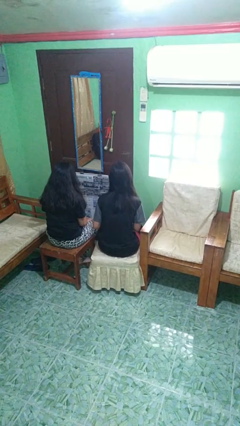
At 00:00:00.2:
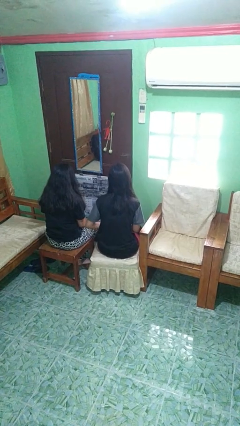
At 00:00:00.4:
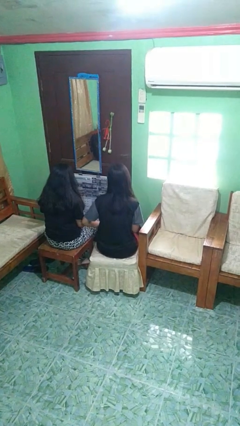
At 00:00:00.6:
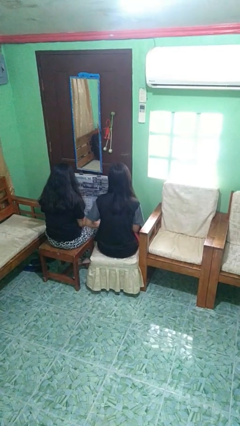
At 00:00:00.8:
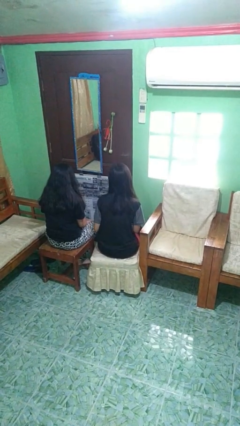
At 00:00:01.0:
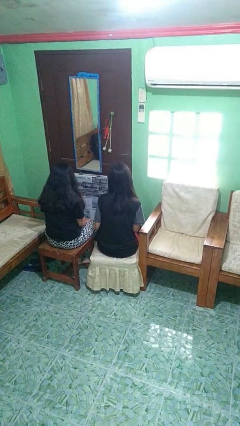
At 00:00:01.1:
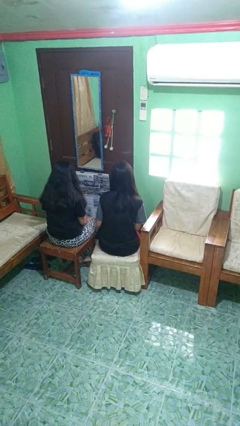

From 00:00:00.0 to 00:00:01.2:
person nudges person with elbow

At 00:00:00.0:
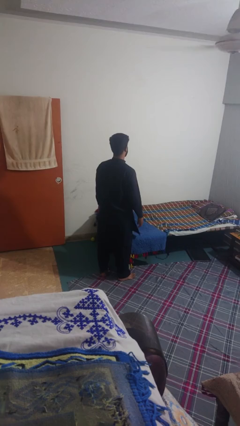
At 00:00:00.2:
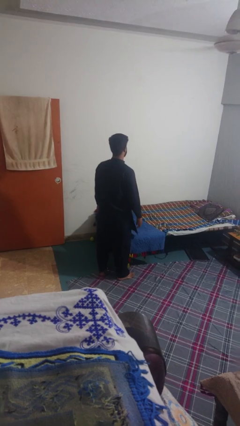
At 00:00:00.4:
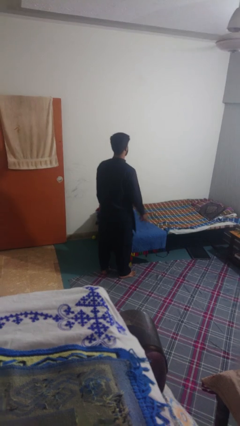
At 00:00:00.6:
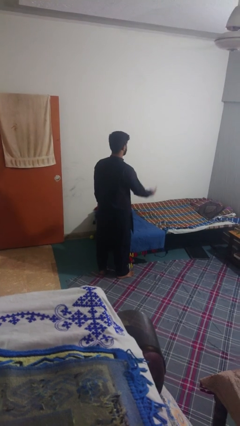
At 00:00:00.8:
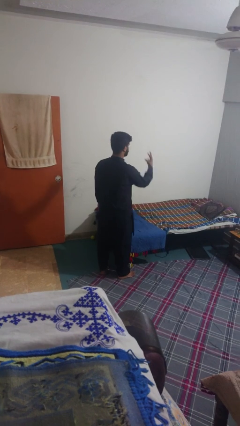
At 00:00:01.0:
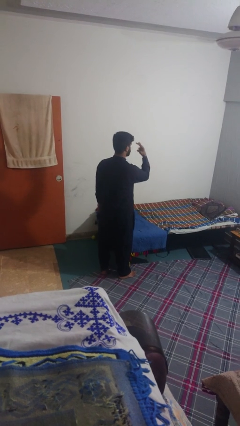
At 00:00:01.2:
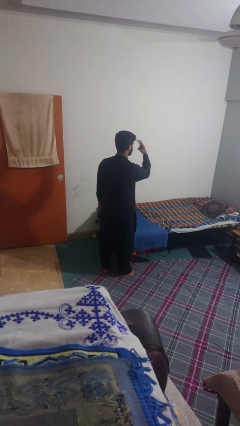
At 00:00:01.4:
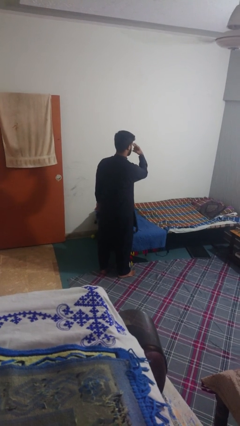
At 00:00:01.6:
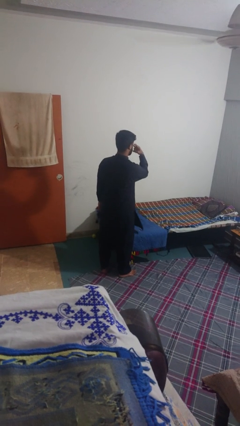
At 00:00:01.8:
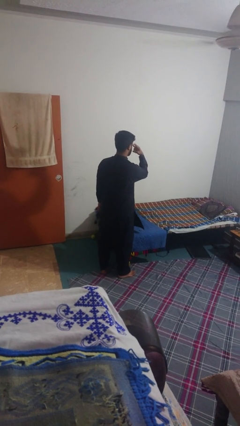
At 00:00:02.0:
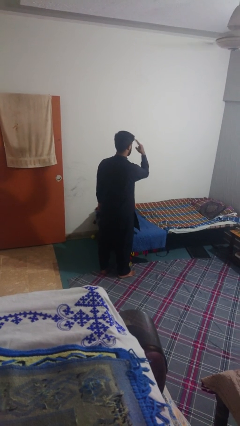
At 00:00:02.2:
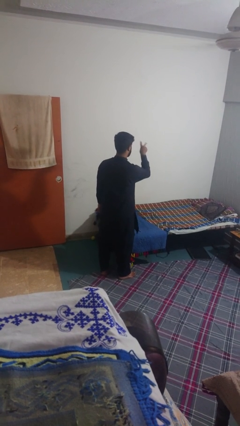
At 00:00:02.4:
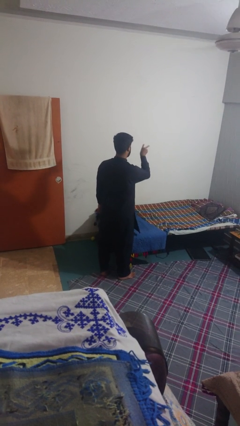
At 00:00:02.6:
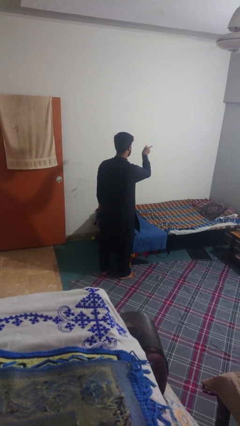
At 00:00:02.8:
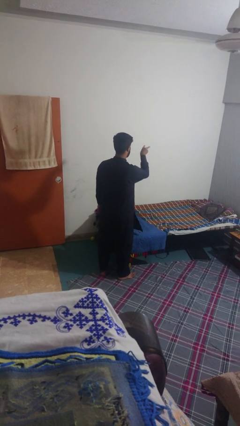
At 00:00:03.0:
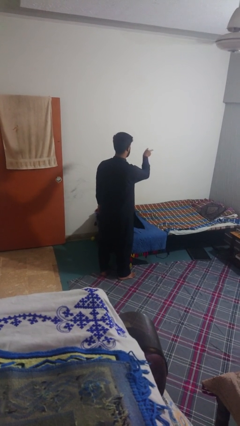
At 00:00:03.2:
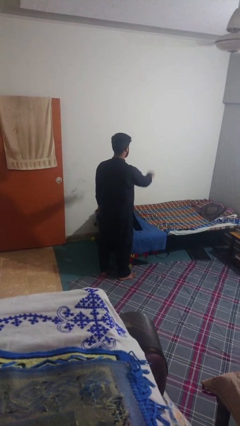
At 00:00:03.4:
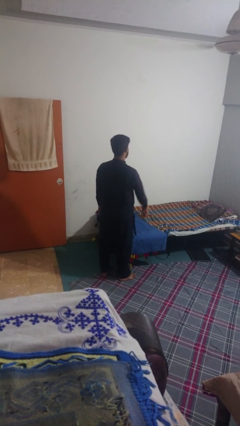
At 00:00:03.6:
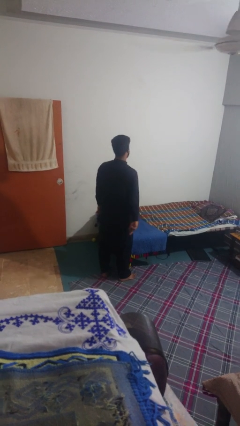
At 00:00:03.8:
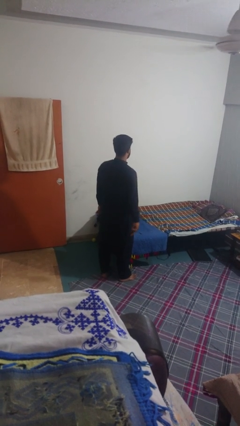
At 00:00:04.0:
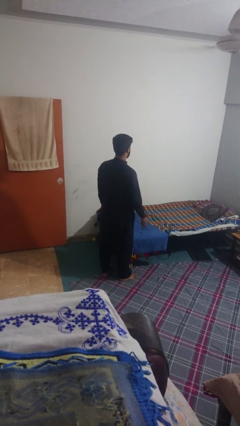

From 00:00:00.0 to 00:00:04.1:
person gestures watch closely

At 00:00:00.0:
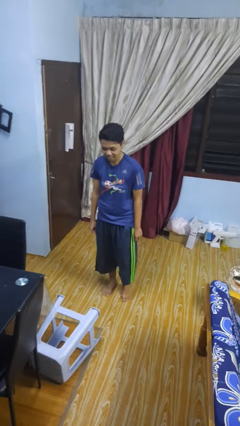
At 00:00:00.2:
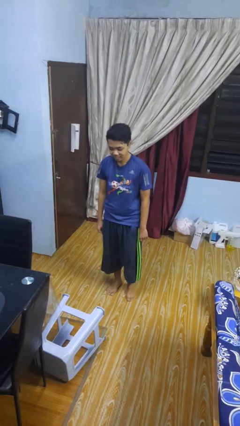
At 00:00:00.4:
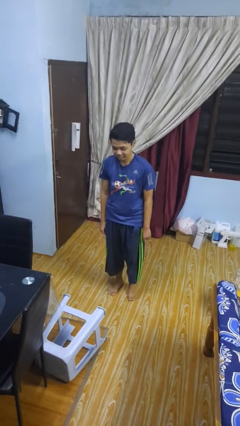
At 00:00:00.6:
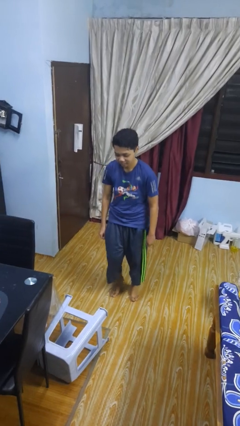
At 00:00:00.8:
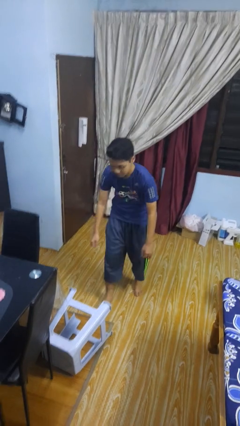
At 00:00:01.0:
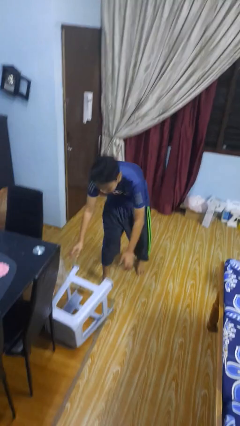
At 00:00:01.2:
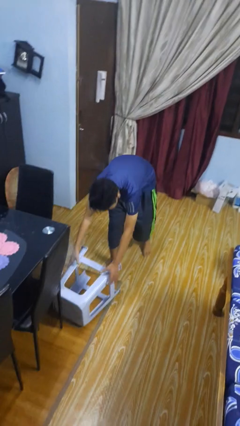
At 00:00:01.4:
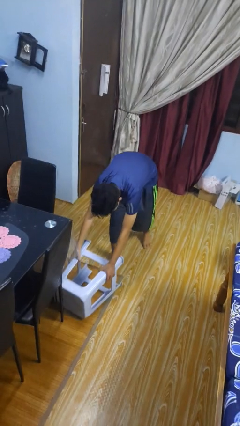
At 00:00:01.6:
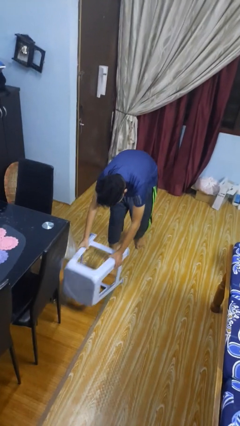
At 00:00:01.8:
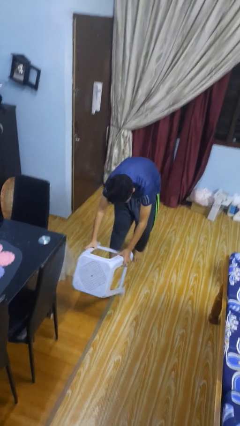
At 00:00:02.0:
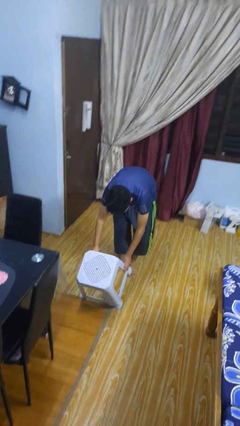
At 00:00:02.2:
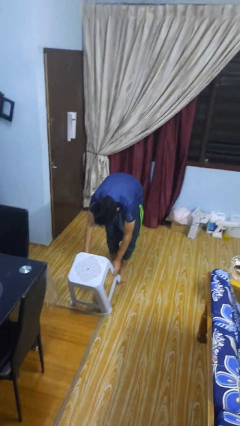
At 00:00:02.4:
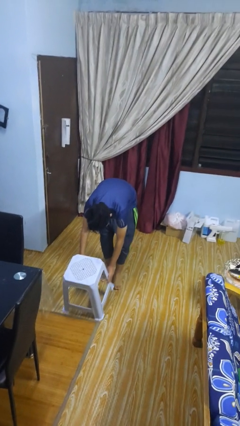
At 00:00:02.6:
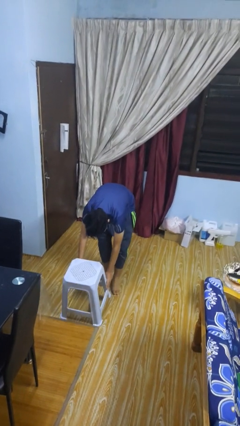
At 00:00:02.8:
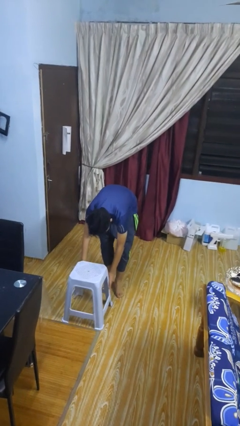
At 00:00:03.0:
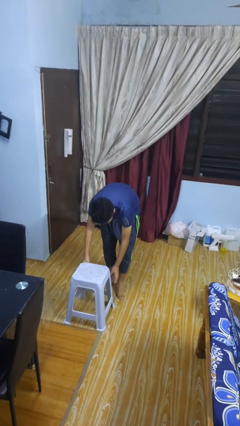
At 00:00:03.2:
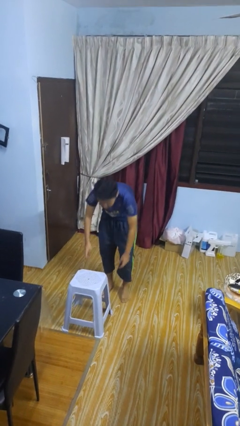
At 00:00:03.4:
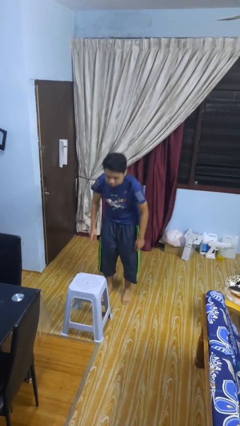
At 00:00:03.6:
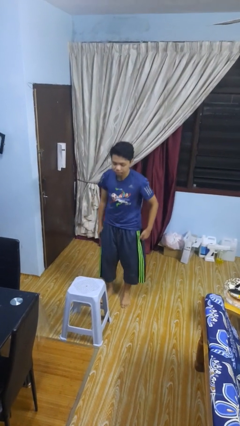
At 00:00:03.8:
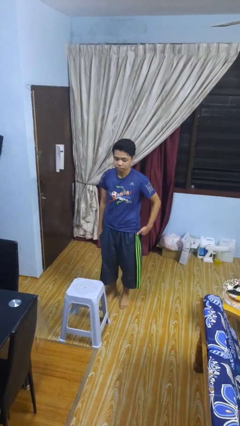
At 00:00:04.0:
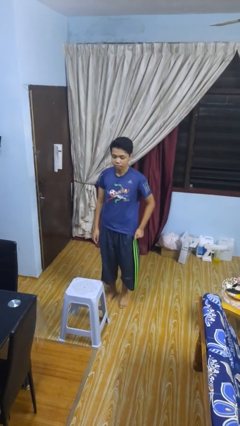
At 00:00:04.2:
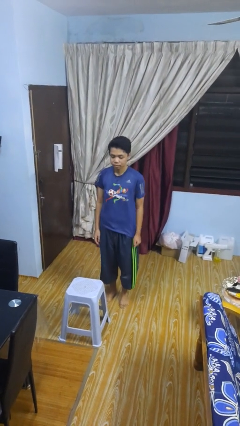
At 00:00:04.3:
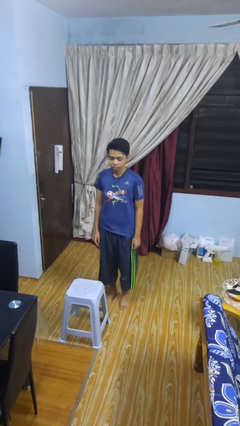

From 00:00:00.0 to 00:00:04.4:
person sets upright furniture

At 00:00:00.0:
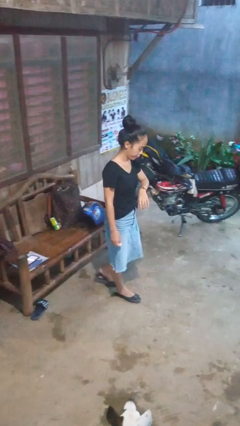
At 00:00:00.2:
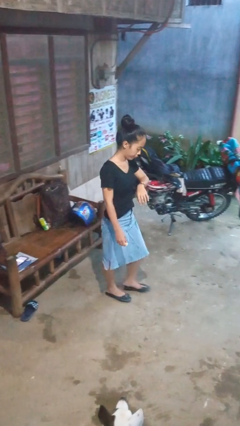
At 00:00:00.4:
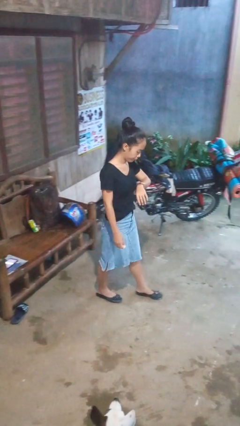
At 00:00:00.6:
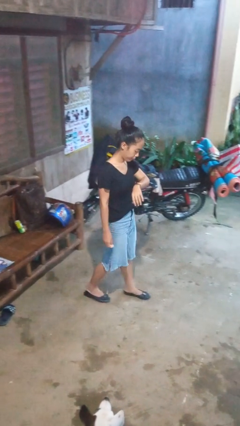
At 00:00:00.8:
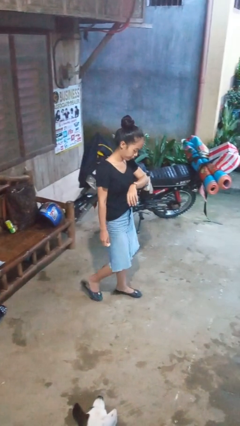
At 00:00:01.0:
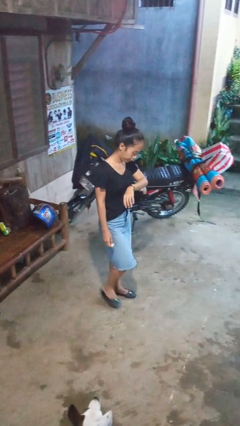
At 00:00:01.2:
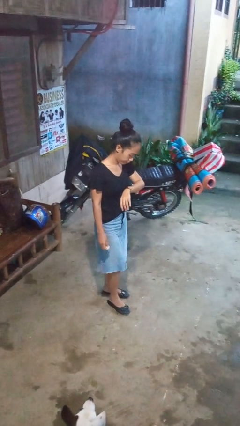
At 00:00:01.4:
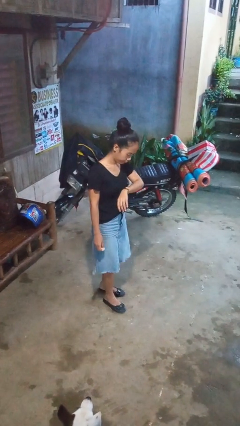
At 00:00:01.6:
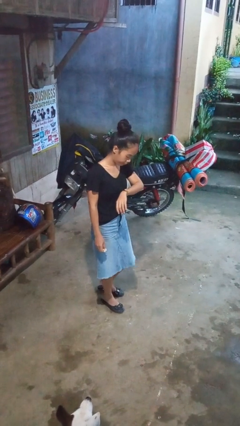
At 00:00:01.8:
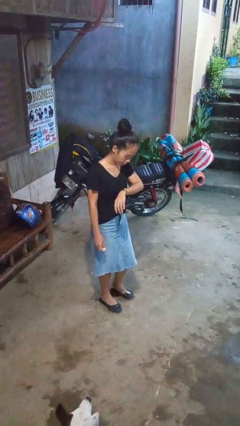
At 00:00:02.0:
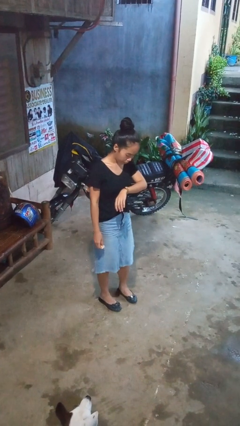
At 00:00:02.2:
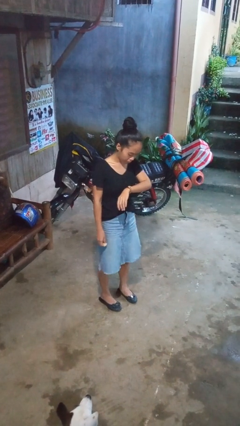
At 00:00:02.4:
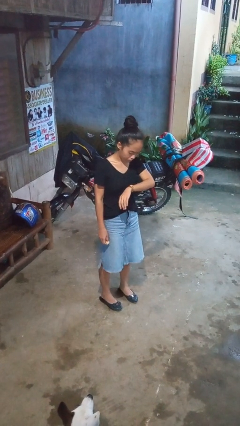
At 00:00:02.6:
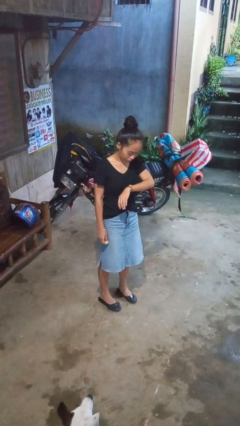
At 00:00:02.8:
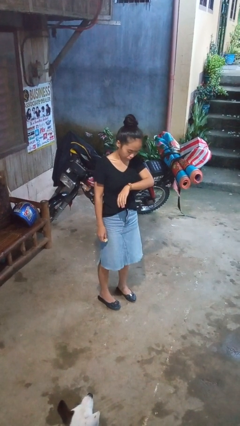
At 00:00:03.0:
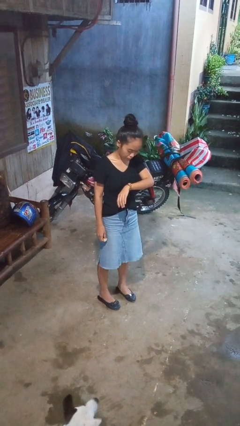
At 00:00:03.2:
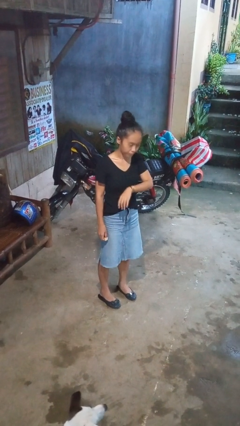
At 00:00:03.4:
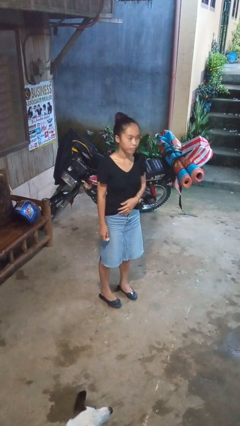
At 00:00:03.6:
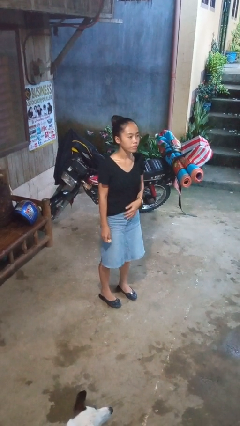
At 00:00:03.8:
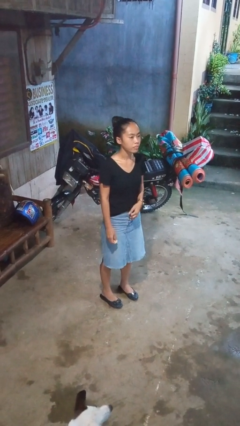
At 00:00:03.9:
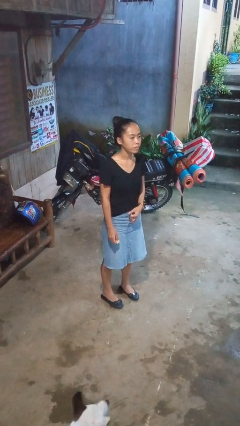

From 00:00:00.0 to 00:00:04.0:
person looks at wristwatch

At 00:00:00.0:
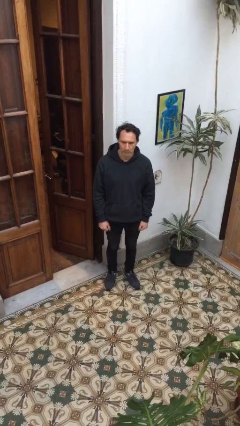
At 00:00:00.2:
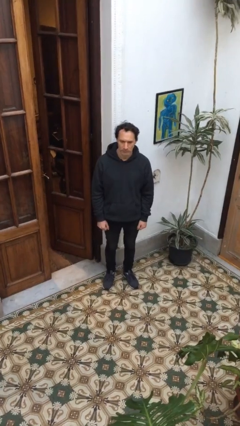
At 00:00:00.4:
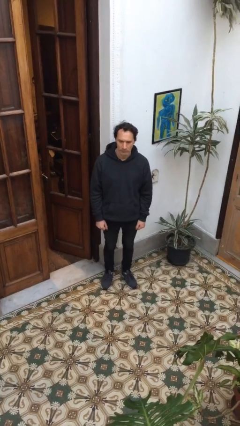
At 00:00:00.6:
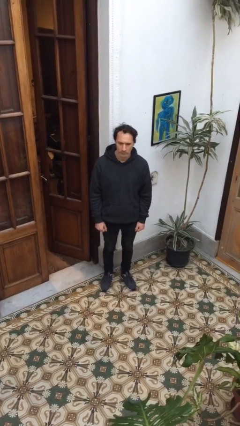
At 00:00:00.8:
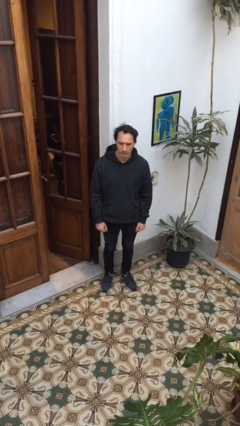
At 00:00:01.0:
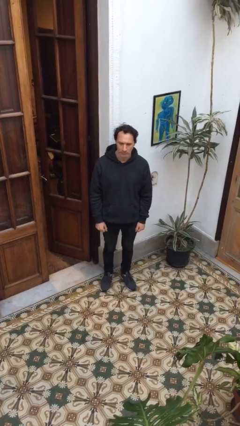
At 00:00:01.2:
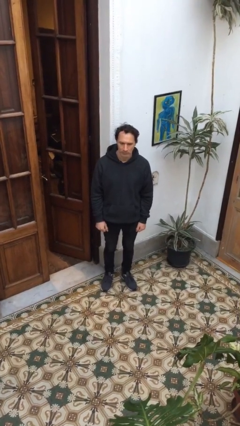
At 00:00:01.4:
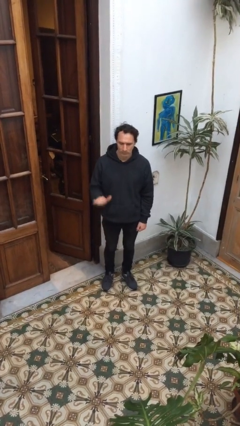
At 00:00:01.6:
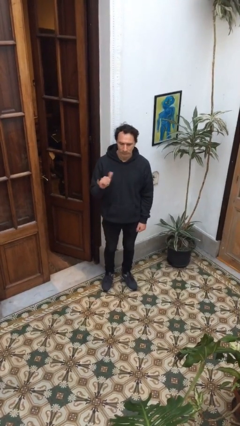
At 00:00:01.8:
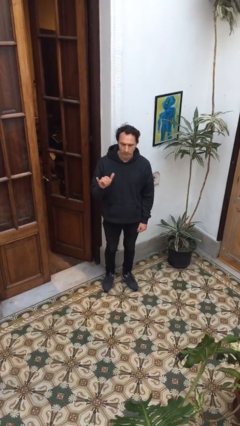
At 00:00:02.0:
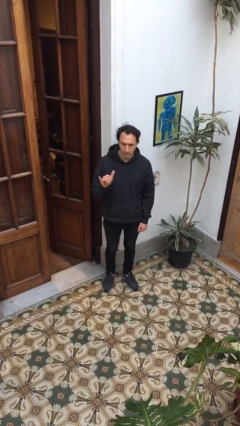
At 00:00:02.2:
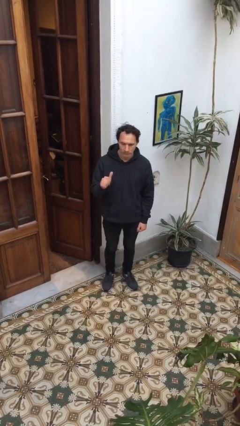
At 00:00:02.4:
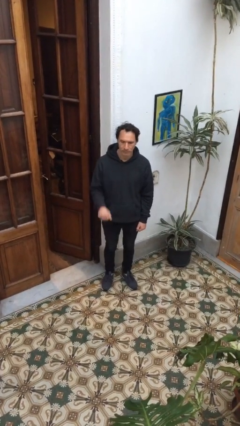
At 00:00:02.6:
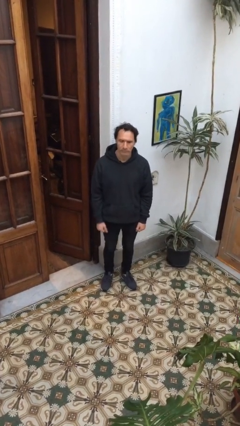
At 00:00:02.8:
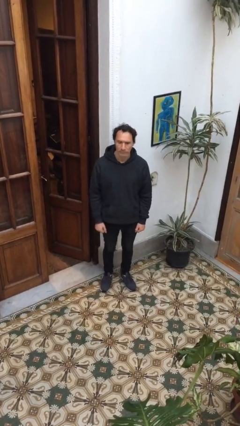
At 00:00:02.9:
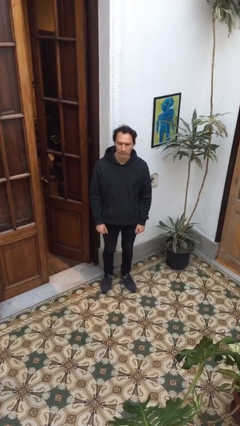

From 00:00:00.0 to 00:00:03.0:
person gestures hang loose

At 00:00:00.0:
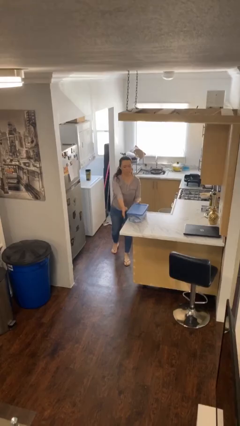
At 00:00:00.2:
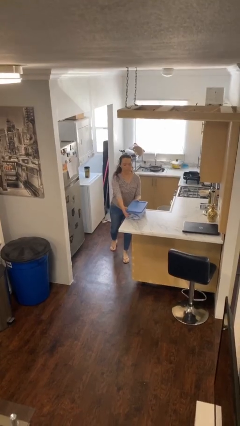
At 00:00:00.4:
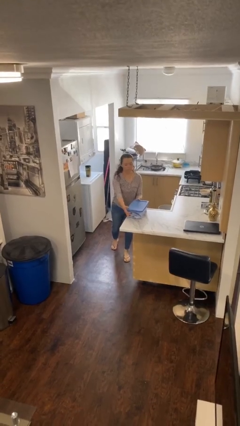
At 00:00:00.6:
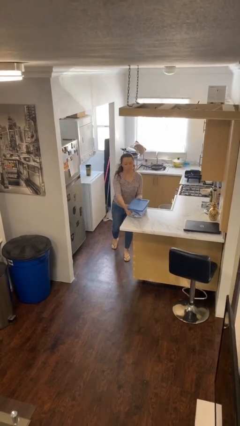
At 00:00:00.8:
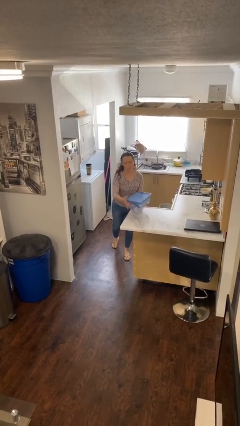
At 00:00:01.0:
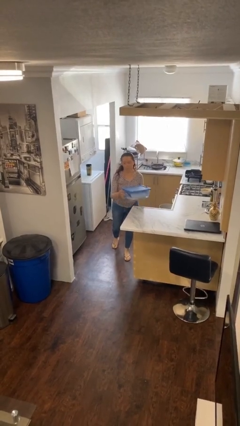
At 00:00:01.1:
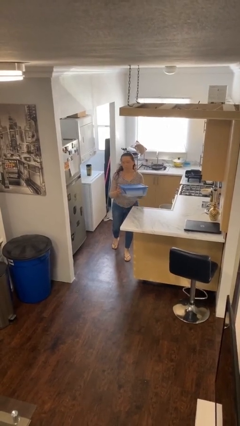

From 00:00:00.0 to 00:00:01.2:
person picks up object from table
